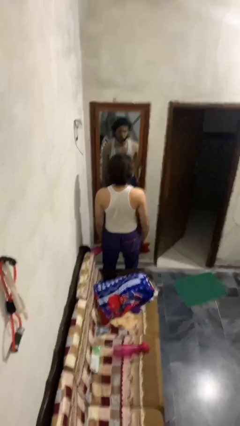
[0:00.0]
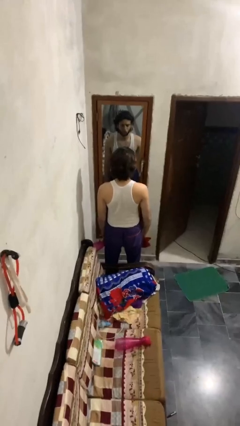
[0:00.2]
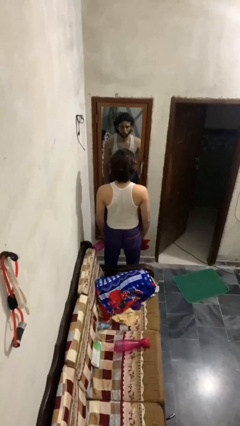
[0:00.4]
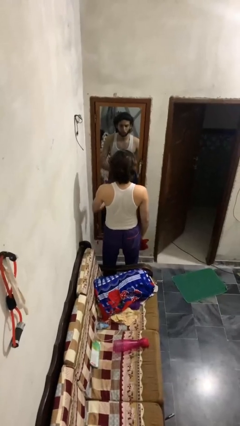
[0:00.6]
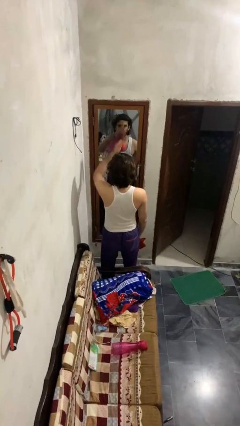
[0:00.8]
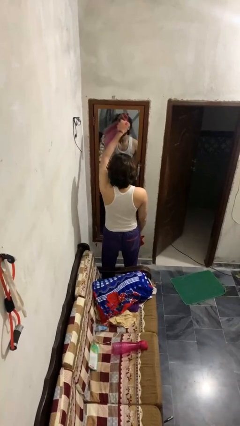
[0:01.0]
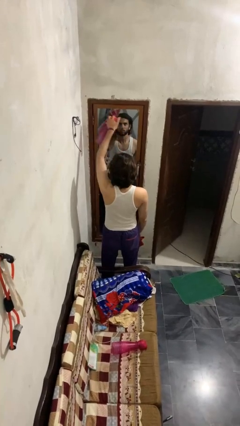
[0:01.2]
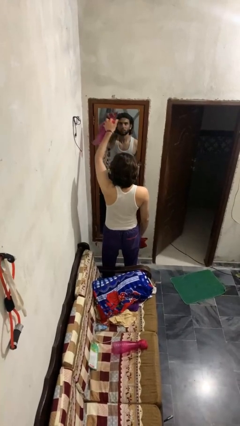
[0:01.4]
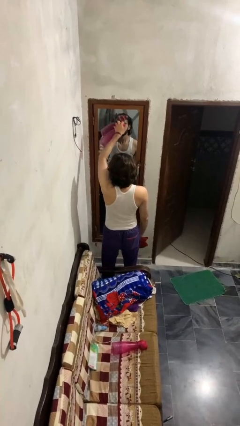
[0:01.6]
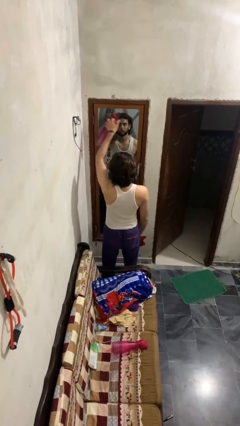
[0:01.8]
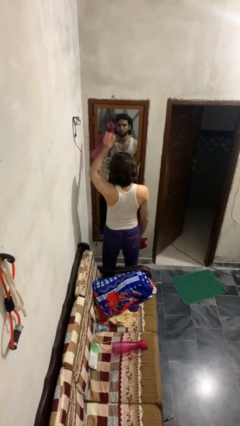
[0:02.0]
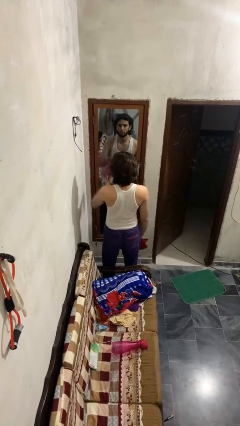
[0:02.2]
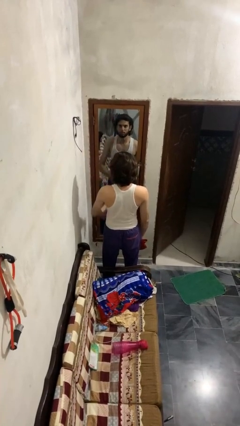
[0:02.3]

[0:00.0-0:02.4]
person sprays from bottle

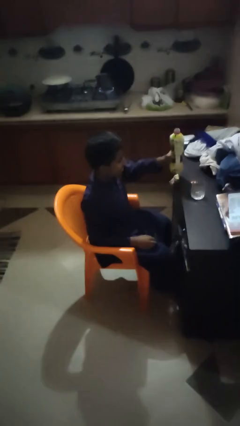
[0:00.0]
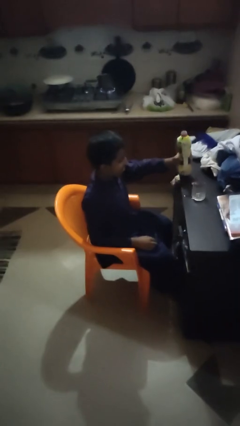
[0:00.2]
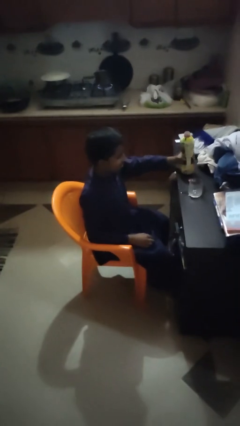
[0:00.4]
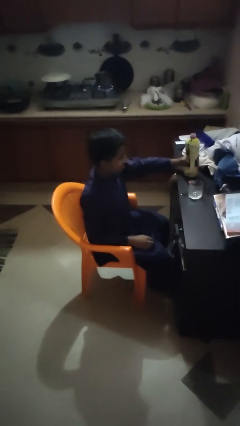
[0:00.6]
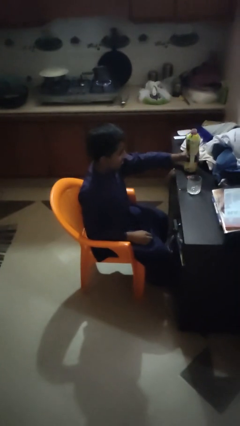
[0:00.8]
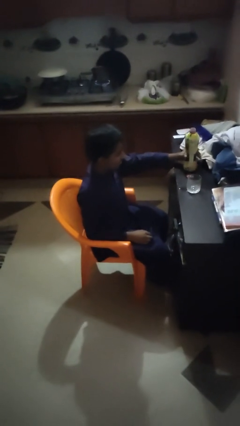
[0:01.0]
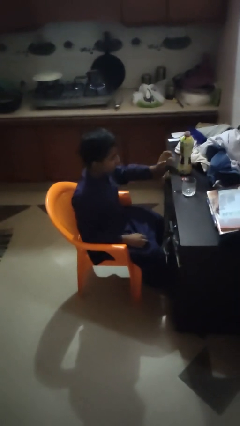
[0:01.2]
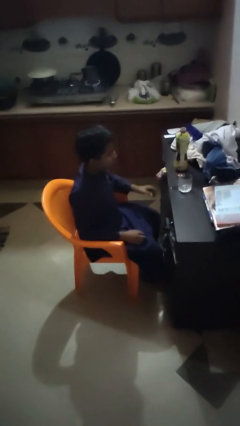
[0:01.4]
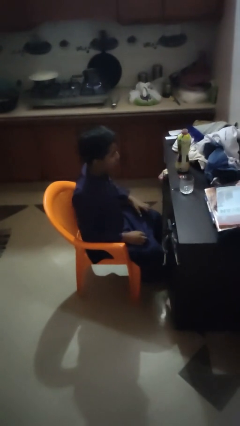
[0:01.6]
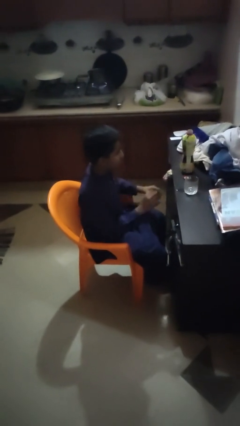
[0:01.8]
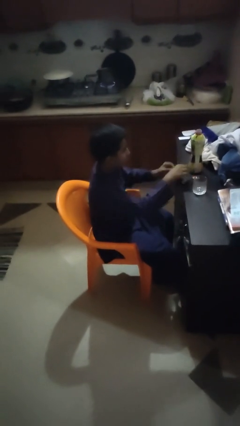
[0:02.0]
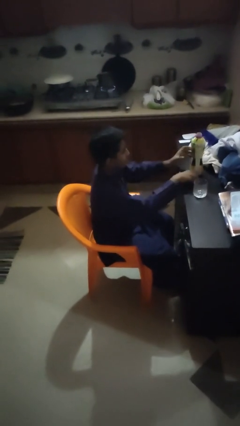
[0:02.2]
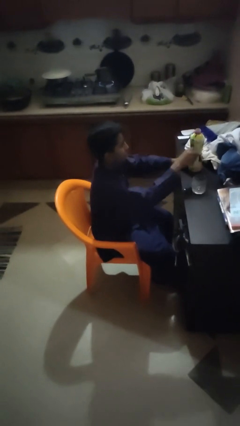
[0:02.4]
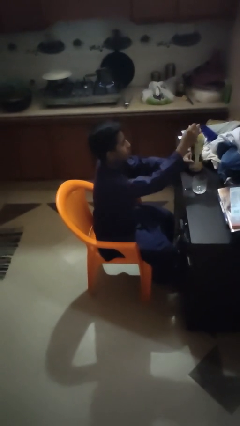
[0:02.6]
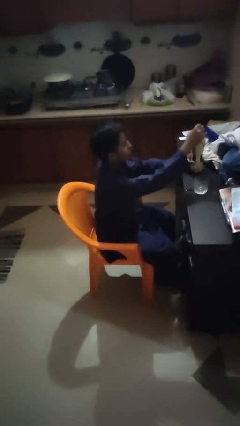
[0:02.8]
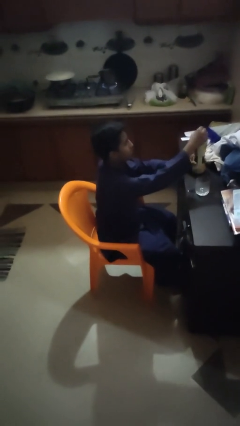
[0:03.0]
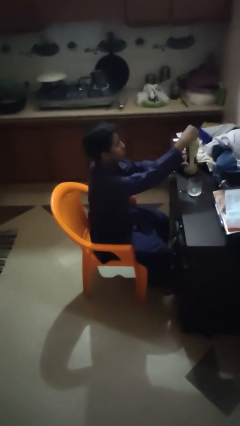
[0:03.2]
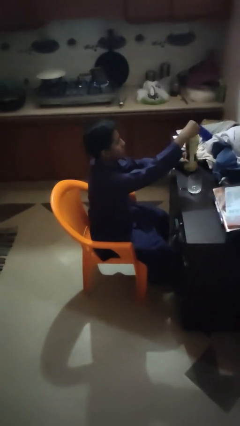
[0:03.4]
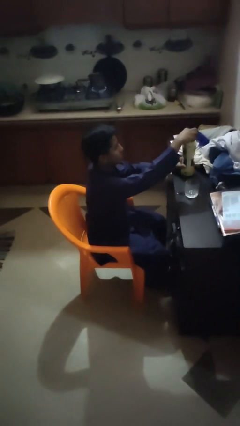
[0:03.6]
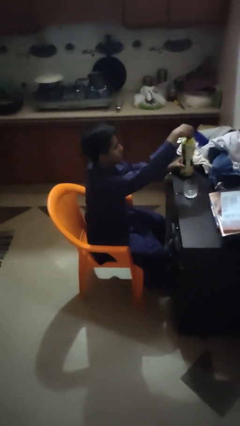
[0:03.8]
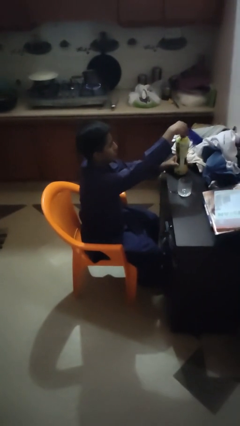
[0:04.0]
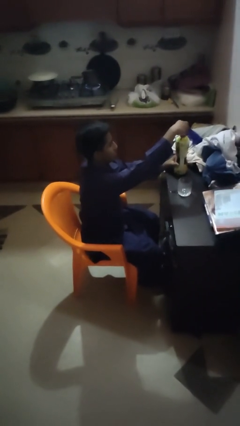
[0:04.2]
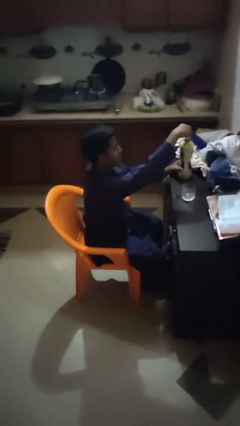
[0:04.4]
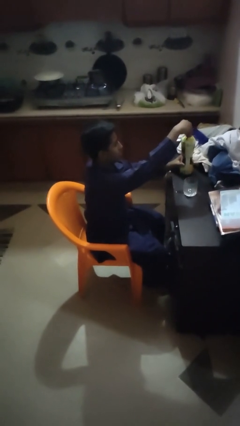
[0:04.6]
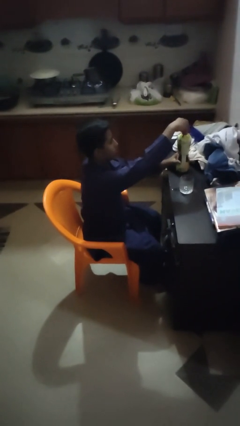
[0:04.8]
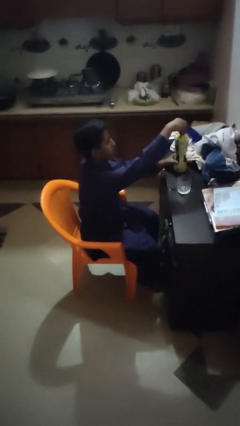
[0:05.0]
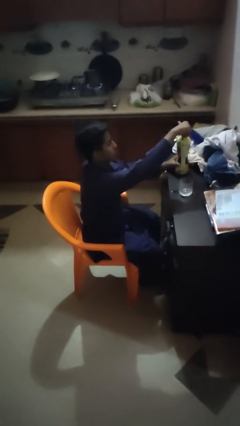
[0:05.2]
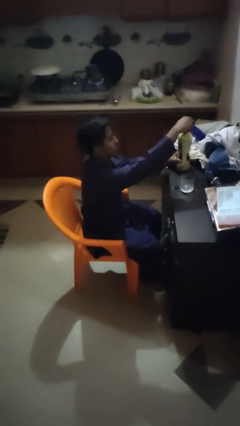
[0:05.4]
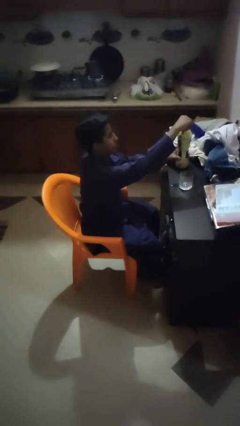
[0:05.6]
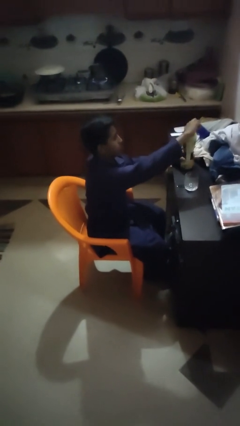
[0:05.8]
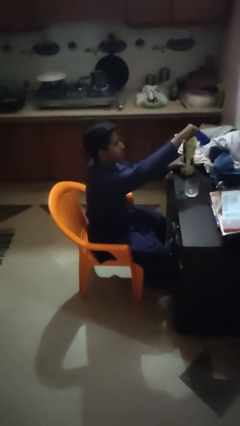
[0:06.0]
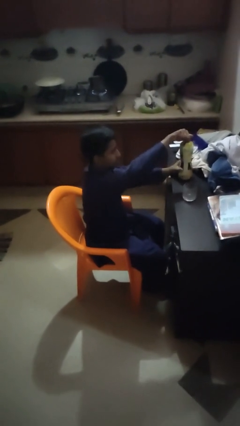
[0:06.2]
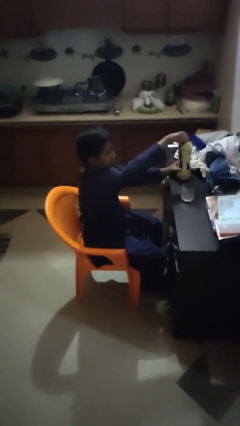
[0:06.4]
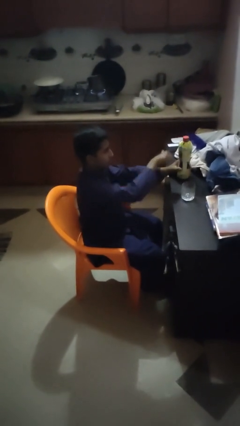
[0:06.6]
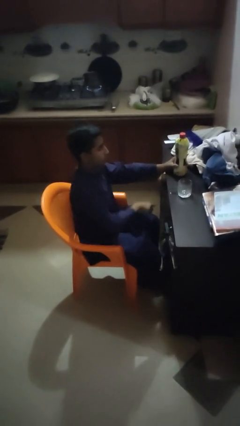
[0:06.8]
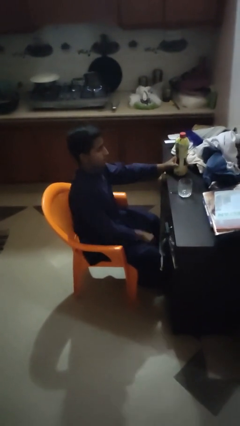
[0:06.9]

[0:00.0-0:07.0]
person screws lid to bottle

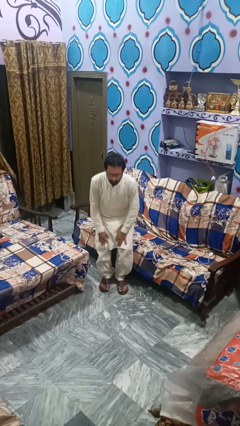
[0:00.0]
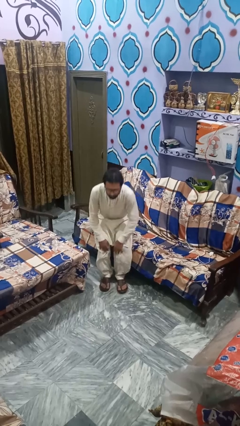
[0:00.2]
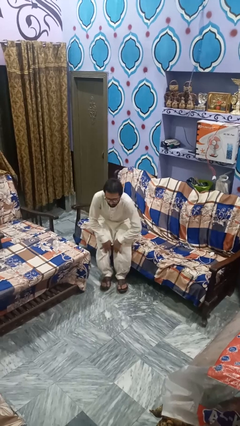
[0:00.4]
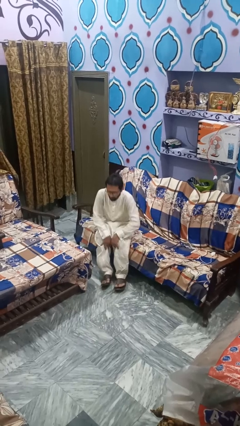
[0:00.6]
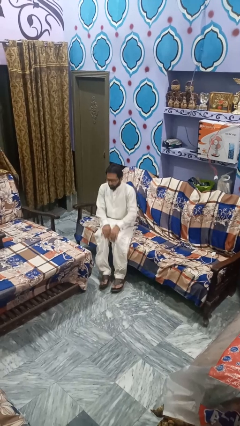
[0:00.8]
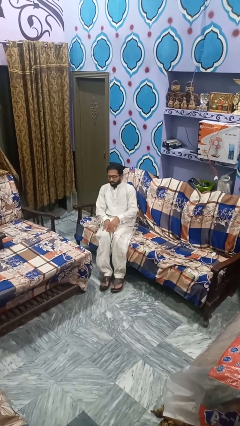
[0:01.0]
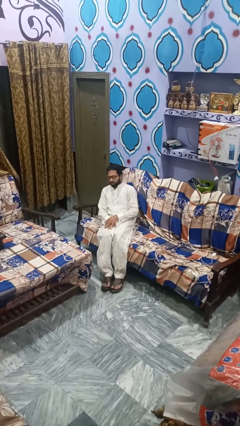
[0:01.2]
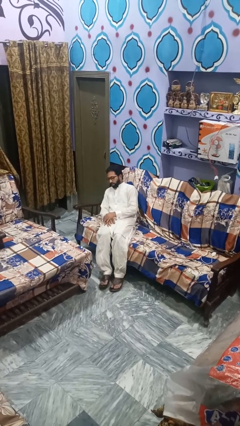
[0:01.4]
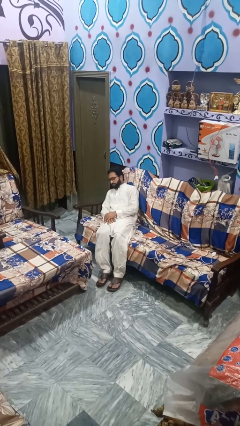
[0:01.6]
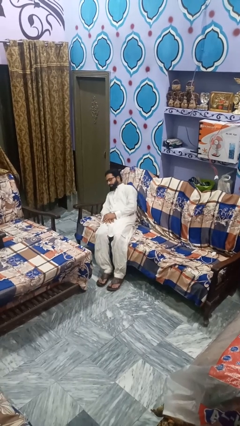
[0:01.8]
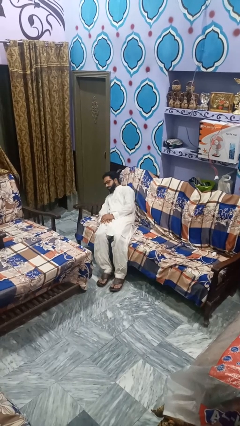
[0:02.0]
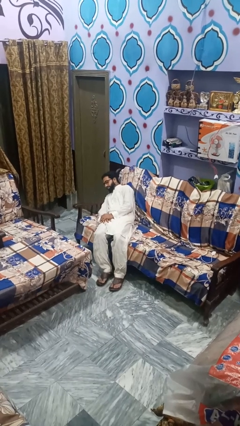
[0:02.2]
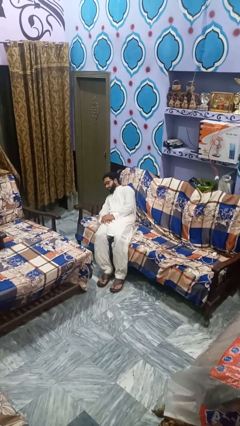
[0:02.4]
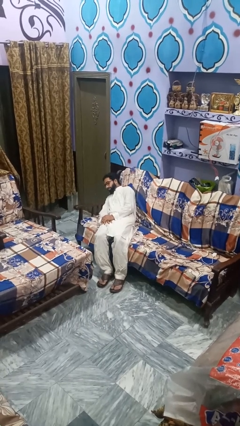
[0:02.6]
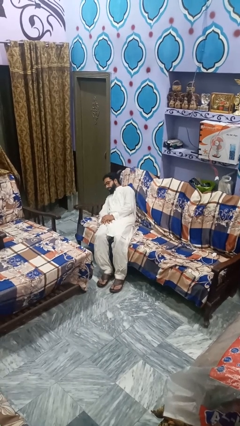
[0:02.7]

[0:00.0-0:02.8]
person lies down on couch

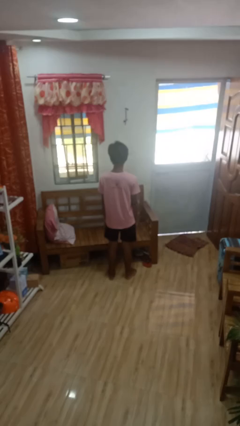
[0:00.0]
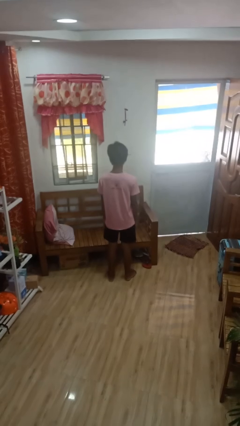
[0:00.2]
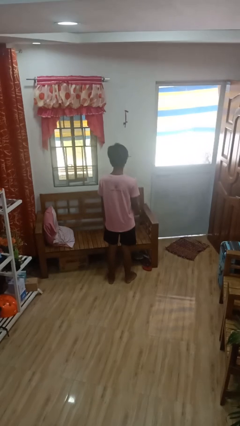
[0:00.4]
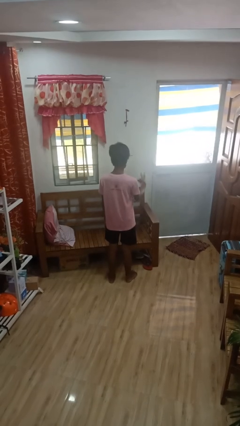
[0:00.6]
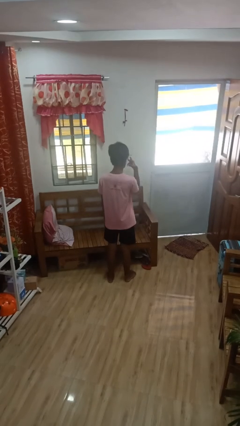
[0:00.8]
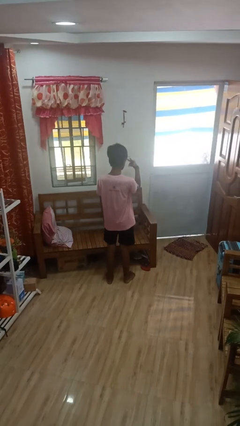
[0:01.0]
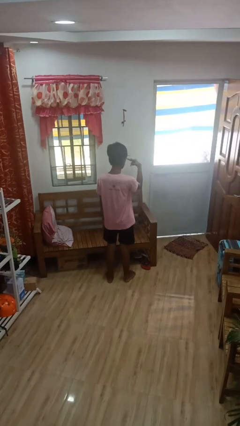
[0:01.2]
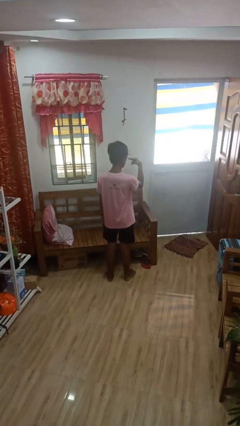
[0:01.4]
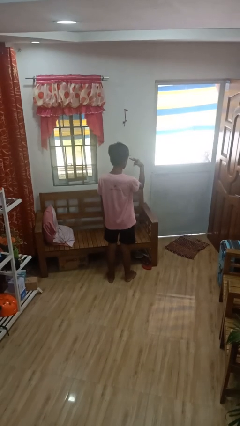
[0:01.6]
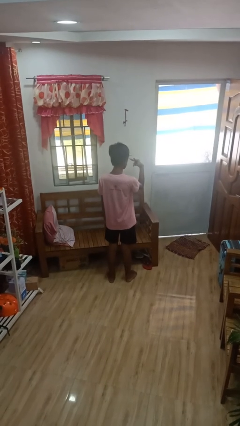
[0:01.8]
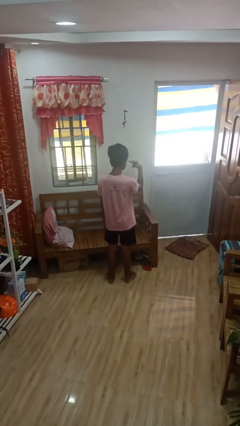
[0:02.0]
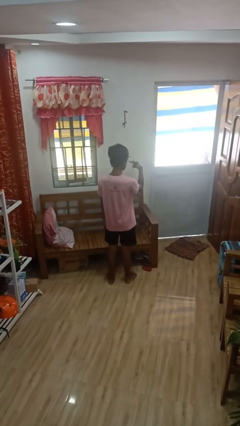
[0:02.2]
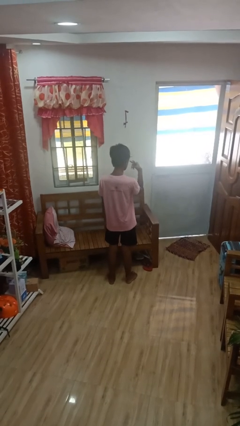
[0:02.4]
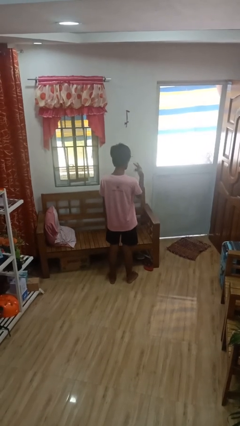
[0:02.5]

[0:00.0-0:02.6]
person gestures watch closely

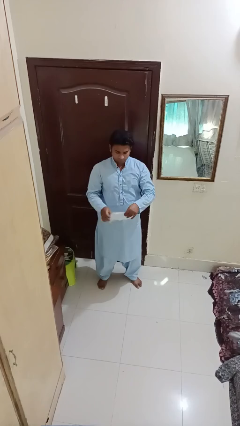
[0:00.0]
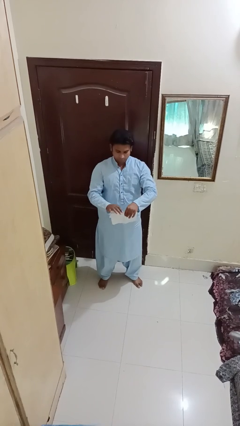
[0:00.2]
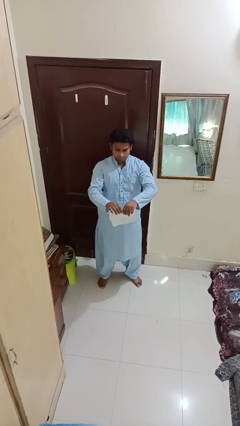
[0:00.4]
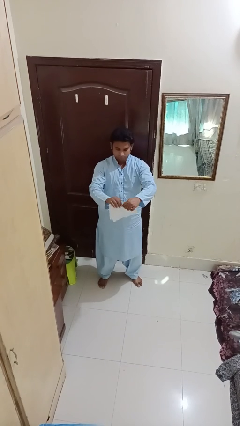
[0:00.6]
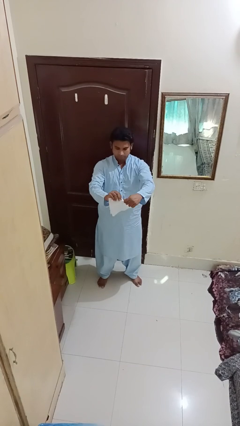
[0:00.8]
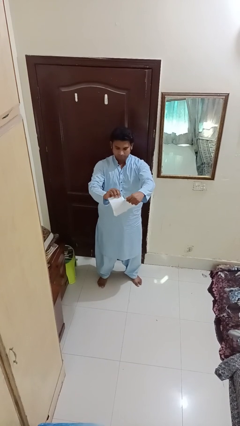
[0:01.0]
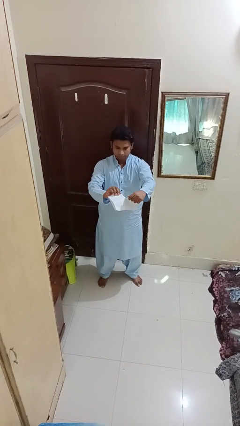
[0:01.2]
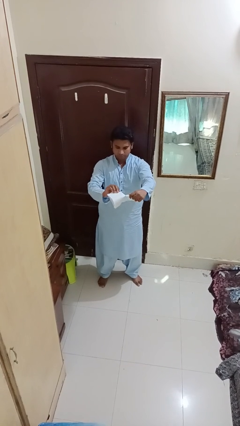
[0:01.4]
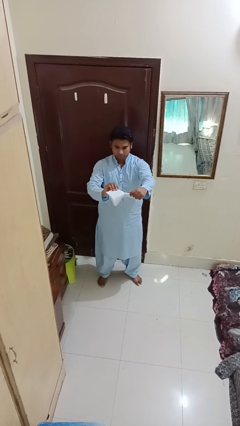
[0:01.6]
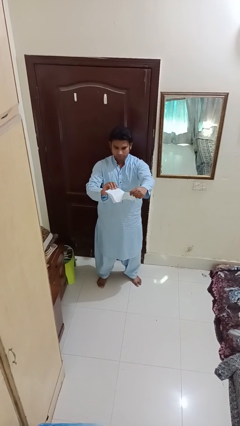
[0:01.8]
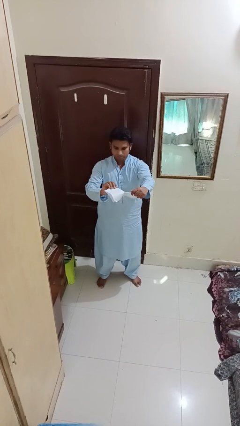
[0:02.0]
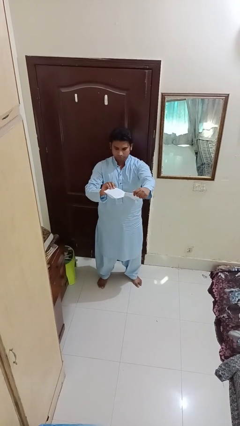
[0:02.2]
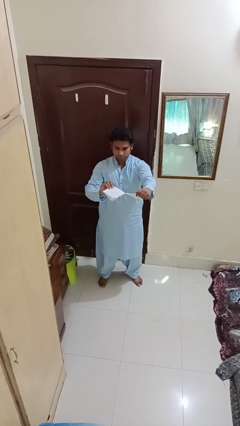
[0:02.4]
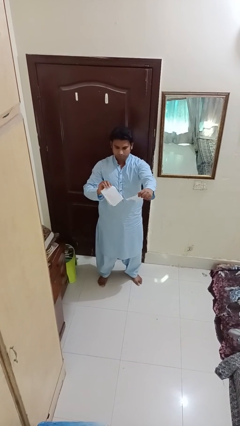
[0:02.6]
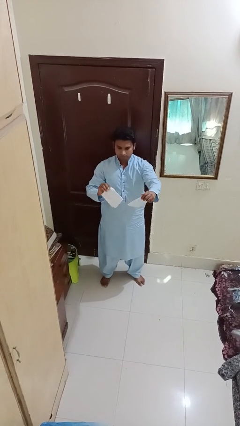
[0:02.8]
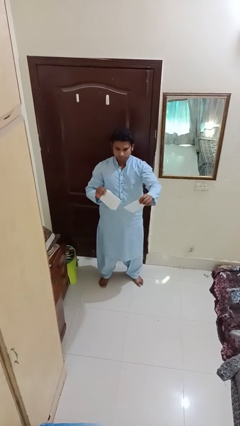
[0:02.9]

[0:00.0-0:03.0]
person tears paper

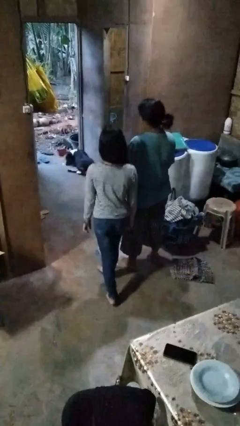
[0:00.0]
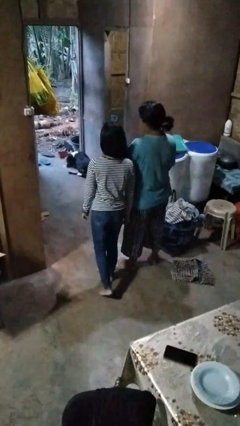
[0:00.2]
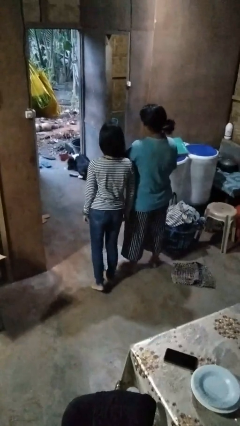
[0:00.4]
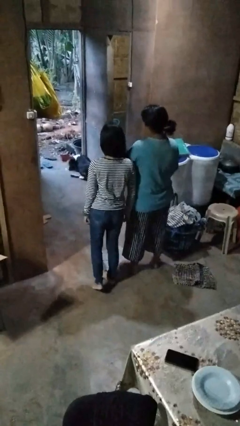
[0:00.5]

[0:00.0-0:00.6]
person bumps into person
